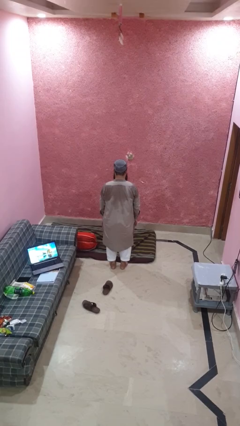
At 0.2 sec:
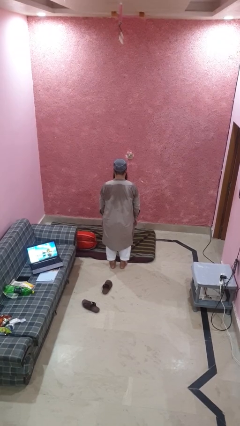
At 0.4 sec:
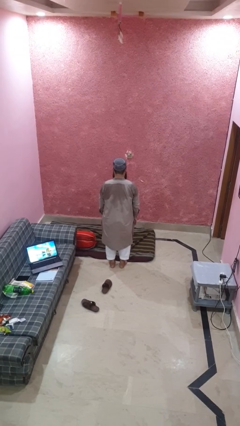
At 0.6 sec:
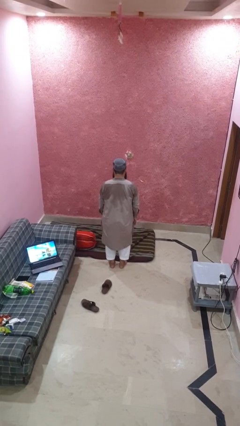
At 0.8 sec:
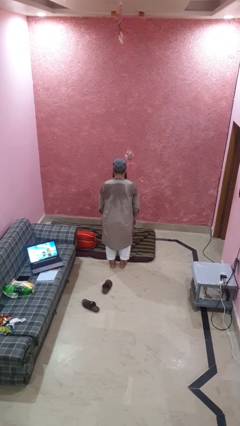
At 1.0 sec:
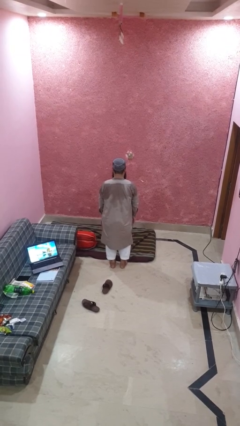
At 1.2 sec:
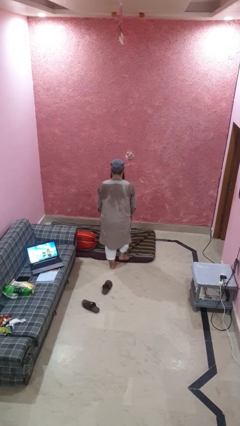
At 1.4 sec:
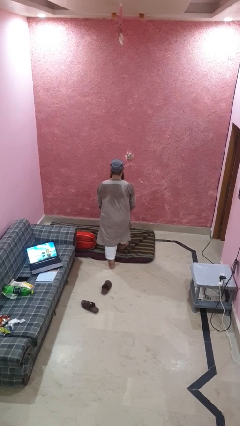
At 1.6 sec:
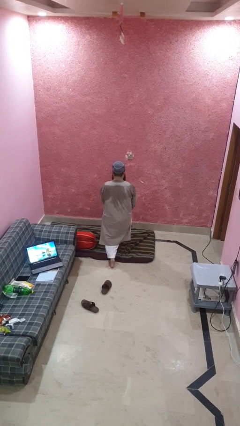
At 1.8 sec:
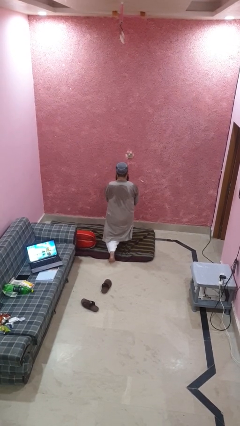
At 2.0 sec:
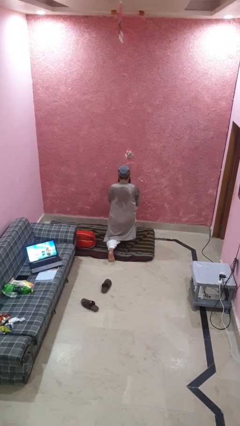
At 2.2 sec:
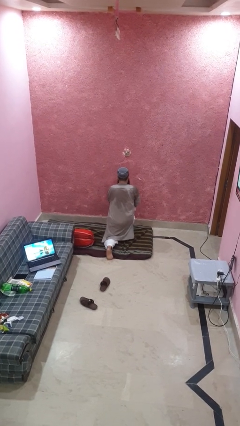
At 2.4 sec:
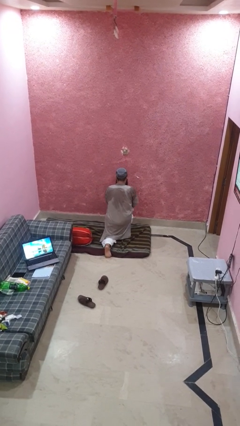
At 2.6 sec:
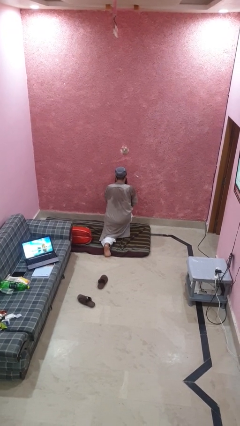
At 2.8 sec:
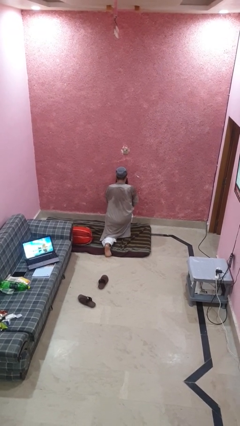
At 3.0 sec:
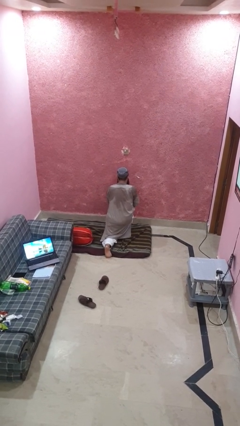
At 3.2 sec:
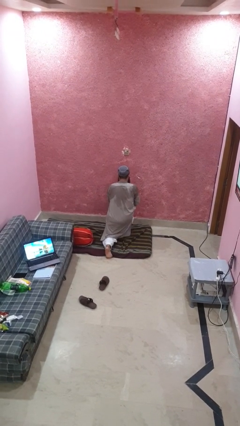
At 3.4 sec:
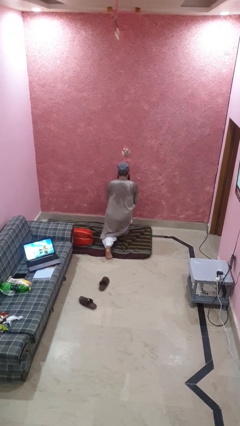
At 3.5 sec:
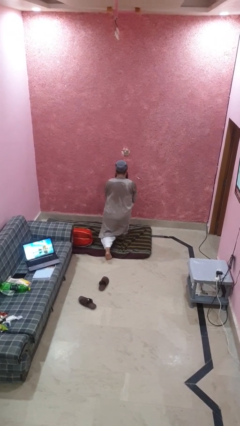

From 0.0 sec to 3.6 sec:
person exercises with lunges

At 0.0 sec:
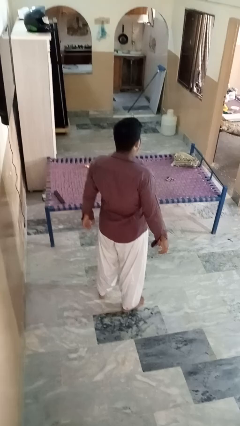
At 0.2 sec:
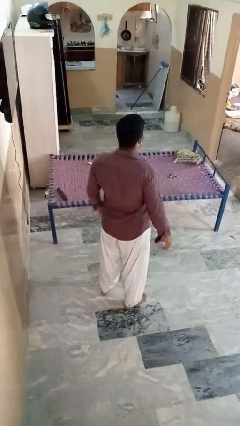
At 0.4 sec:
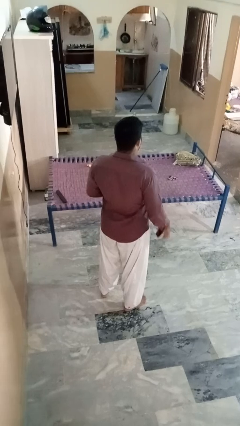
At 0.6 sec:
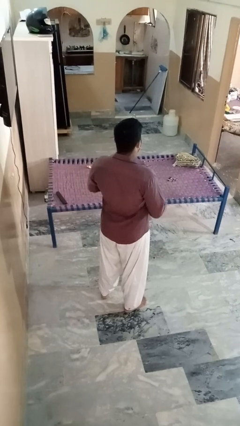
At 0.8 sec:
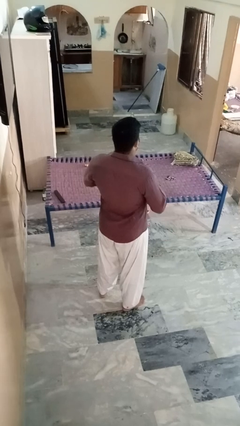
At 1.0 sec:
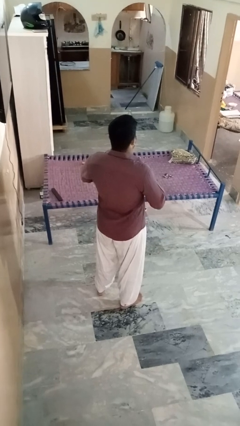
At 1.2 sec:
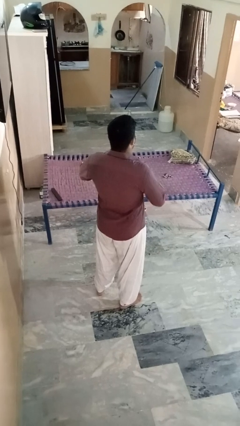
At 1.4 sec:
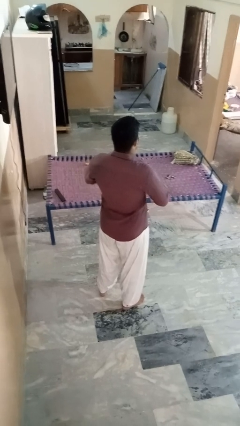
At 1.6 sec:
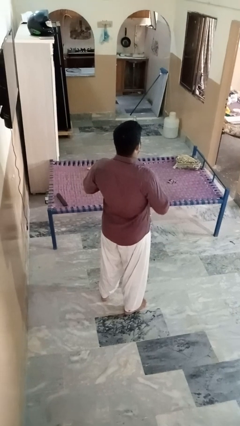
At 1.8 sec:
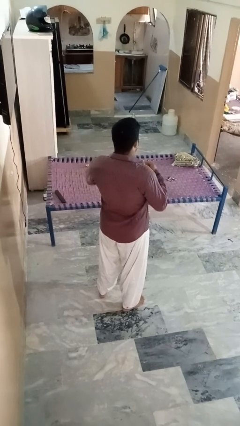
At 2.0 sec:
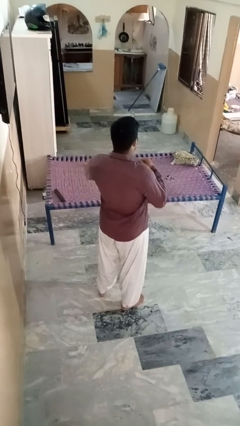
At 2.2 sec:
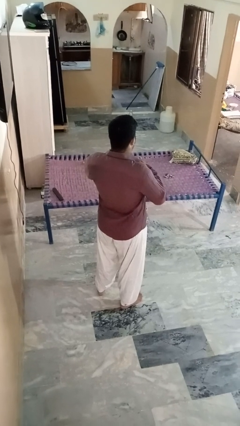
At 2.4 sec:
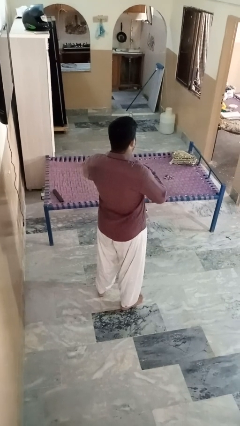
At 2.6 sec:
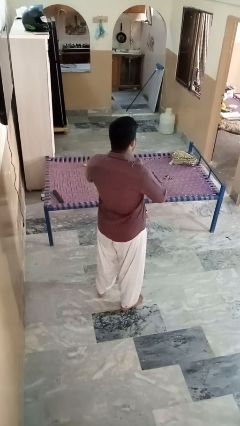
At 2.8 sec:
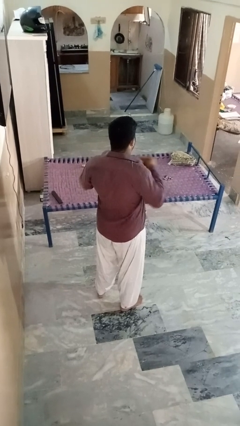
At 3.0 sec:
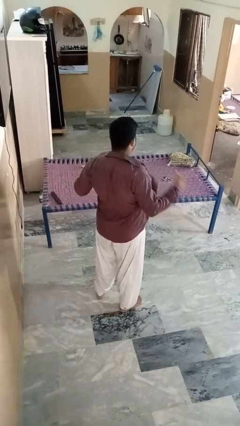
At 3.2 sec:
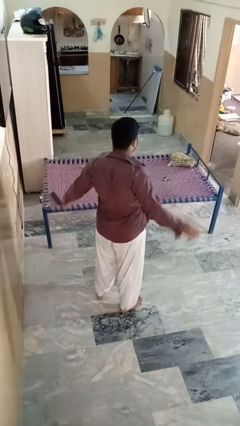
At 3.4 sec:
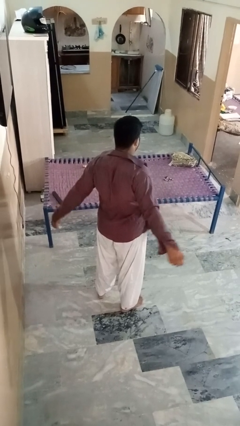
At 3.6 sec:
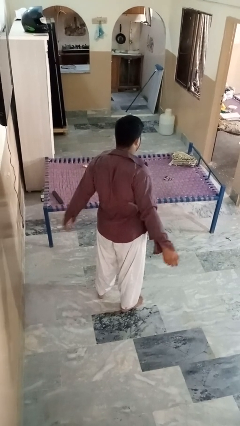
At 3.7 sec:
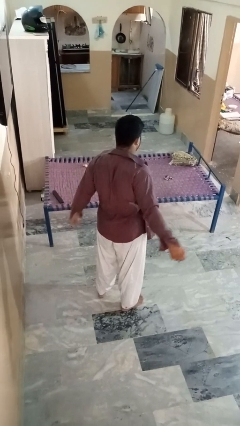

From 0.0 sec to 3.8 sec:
person unbuttons shirt

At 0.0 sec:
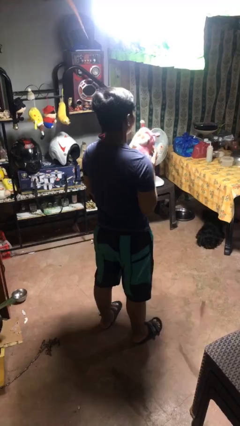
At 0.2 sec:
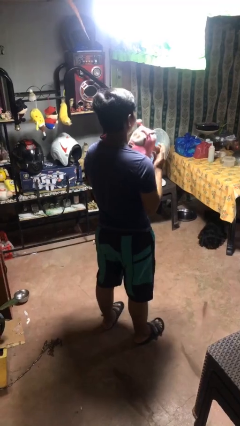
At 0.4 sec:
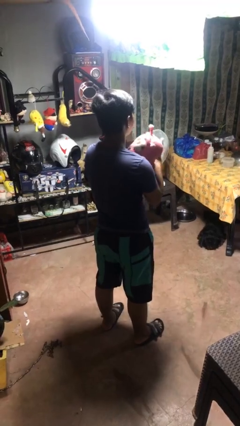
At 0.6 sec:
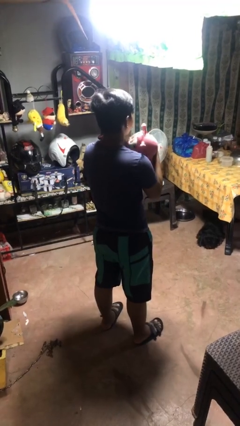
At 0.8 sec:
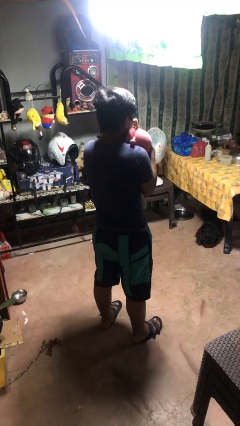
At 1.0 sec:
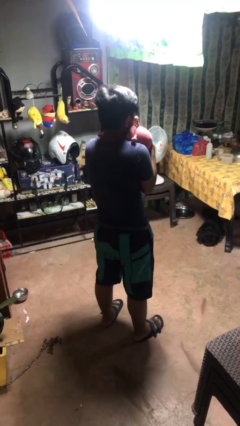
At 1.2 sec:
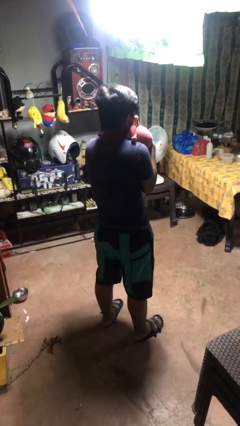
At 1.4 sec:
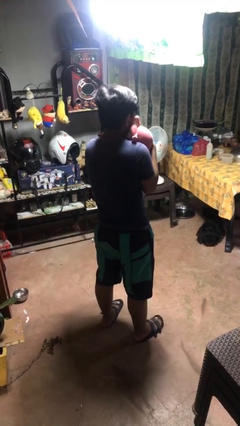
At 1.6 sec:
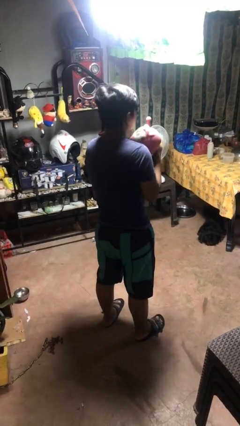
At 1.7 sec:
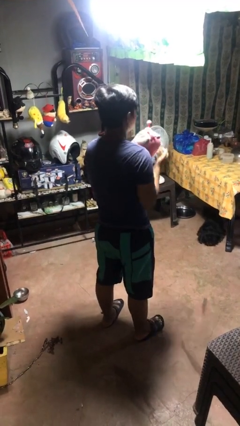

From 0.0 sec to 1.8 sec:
person hugs stuffed animal

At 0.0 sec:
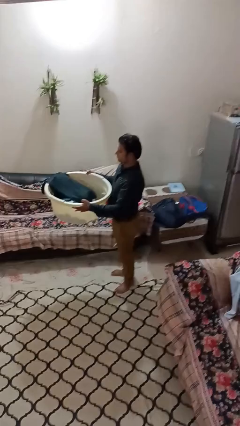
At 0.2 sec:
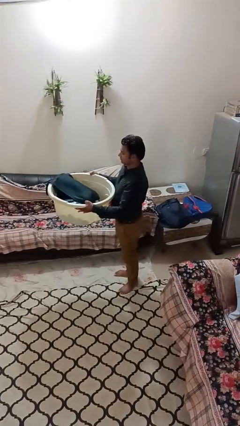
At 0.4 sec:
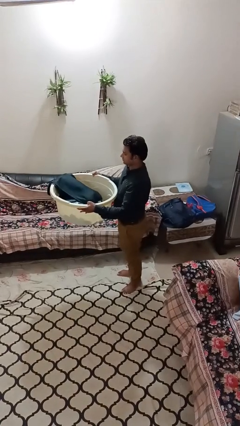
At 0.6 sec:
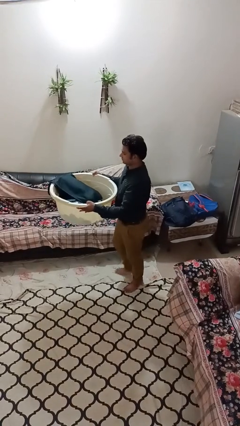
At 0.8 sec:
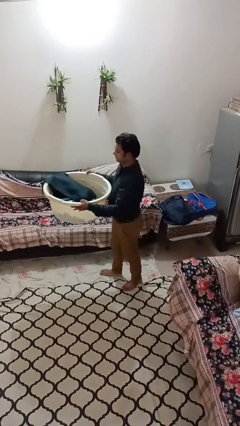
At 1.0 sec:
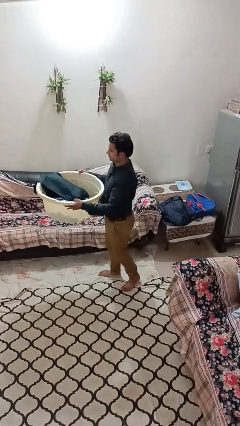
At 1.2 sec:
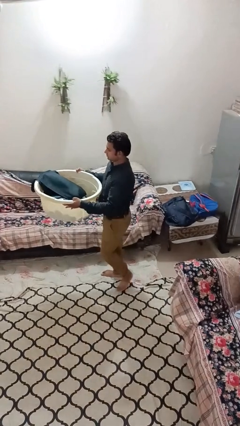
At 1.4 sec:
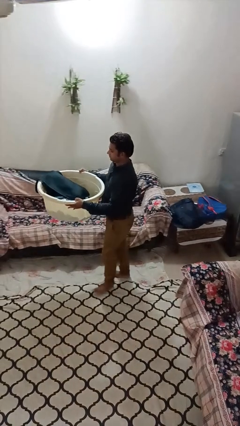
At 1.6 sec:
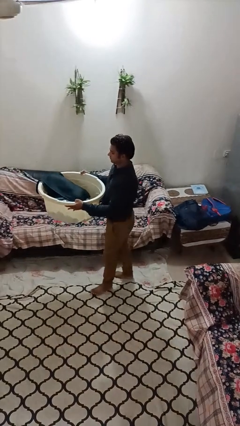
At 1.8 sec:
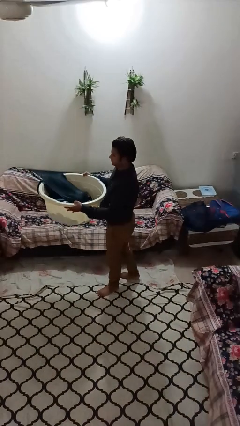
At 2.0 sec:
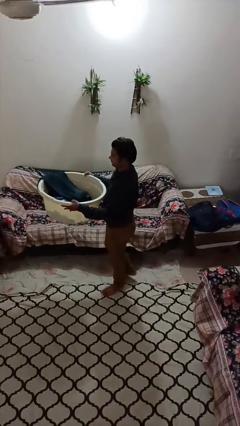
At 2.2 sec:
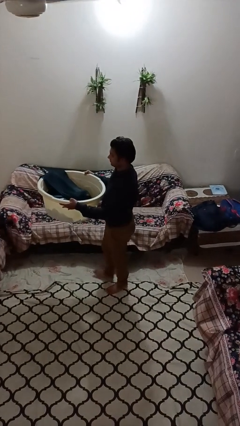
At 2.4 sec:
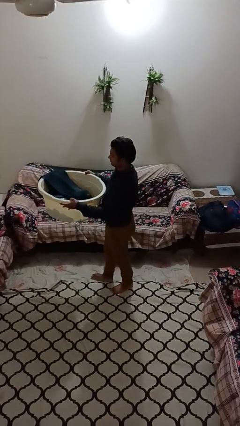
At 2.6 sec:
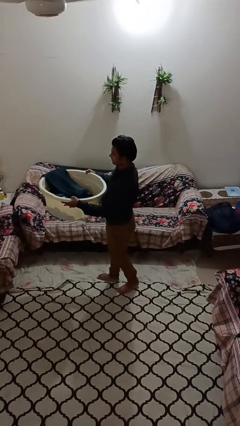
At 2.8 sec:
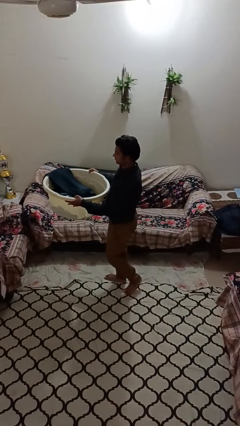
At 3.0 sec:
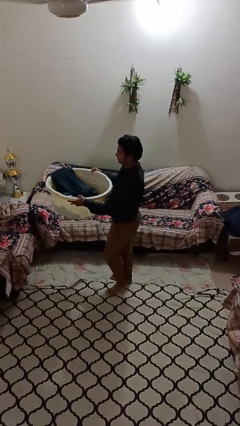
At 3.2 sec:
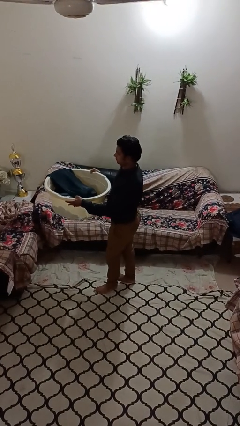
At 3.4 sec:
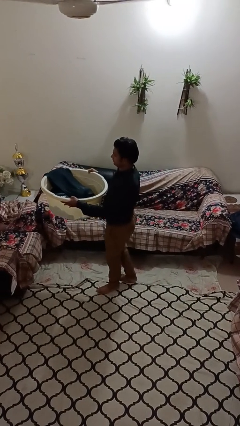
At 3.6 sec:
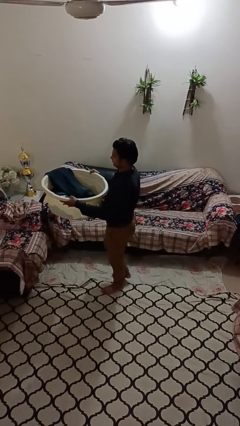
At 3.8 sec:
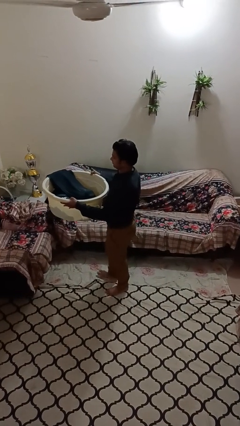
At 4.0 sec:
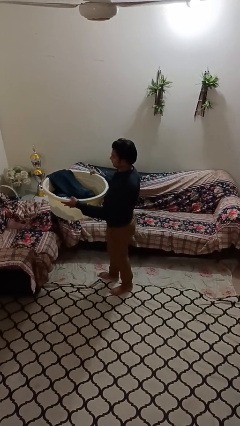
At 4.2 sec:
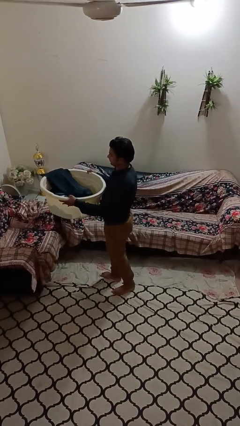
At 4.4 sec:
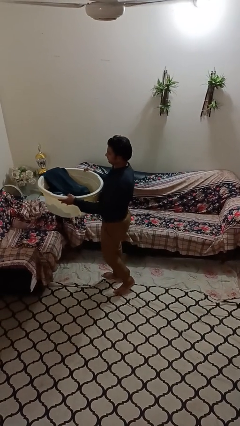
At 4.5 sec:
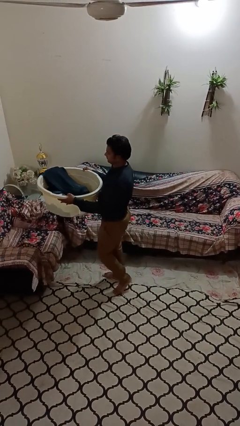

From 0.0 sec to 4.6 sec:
person carries laundry basket

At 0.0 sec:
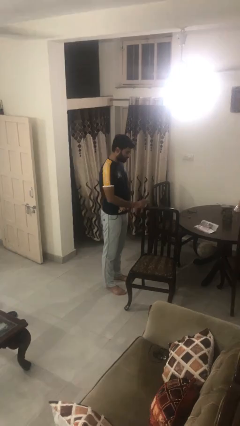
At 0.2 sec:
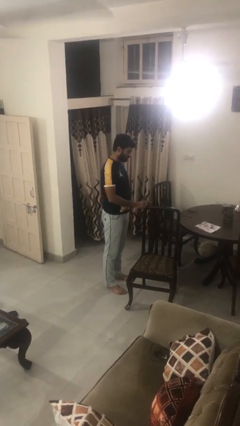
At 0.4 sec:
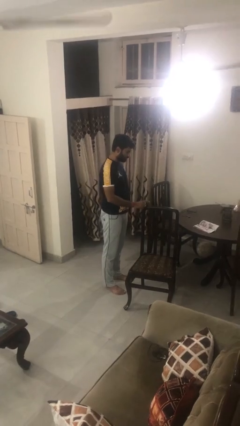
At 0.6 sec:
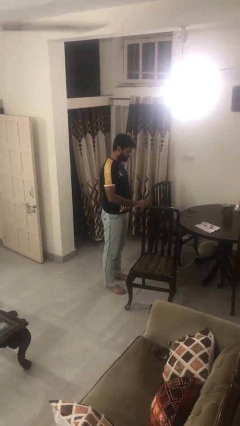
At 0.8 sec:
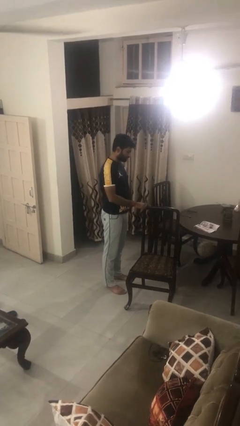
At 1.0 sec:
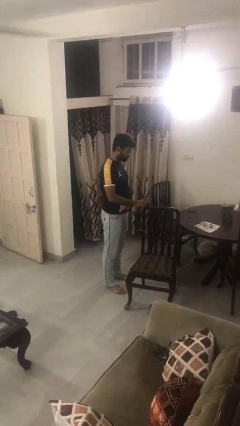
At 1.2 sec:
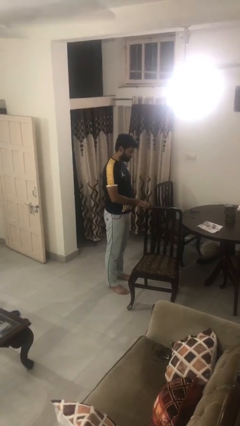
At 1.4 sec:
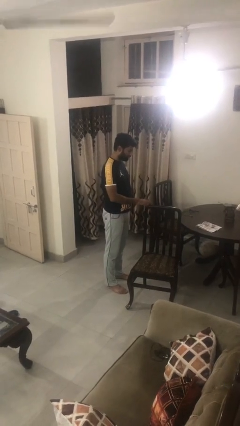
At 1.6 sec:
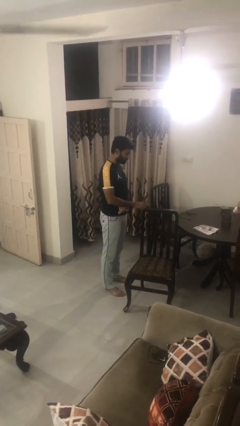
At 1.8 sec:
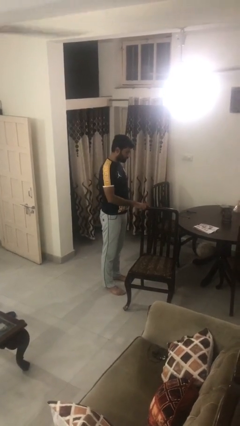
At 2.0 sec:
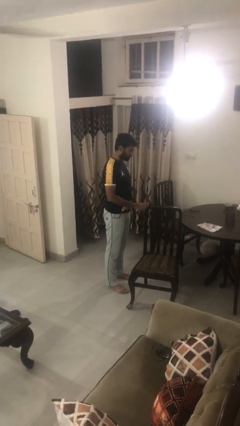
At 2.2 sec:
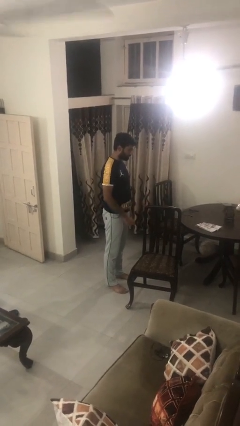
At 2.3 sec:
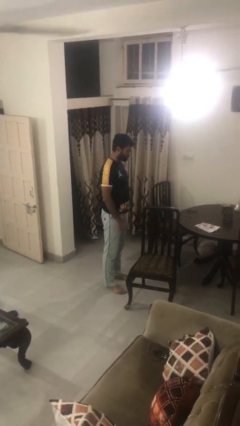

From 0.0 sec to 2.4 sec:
person taps object with finger

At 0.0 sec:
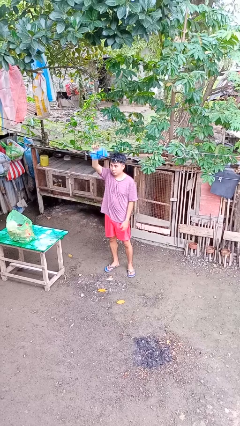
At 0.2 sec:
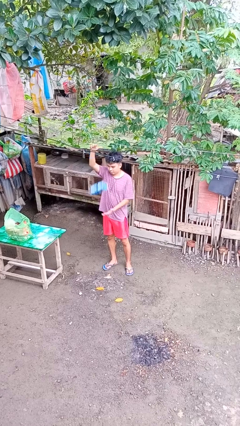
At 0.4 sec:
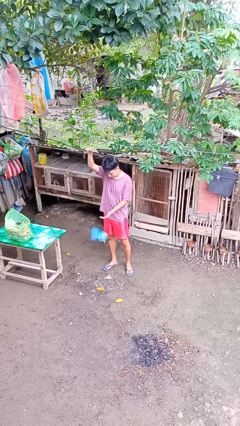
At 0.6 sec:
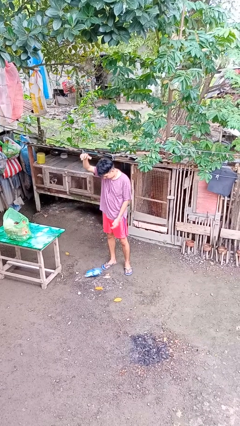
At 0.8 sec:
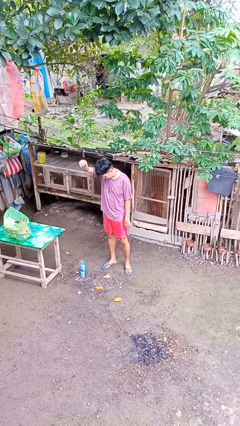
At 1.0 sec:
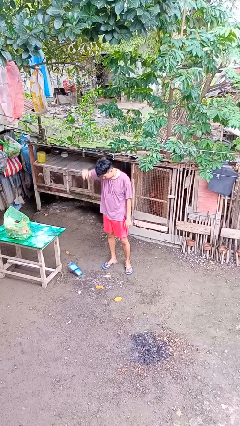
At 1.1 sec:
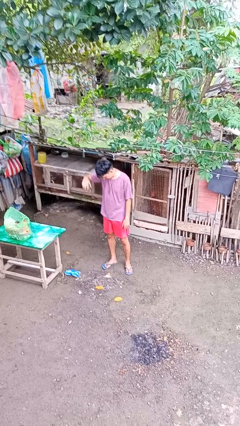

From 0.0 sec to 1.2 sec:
person drops object
